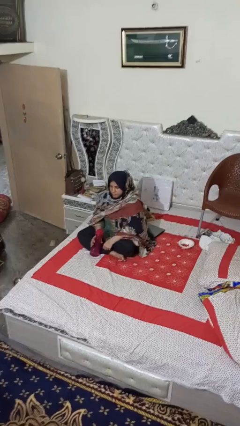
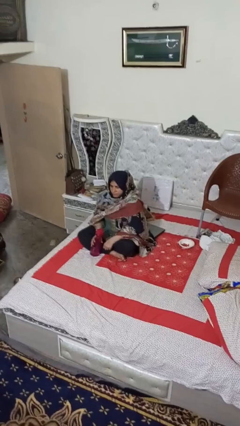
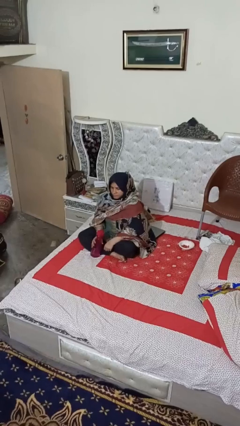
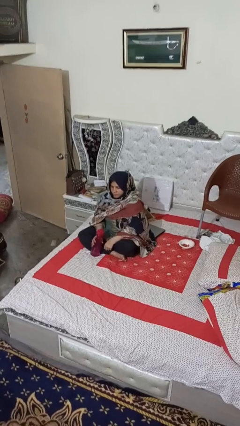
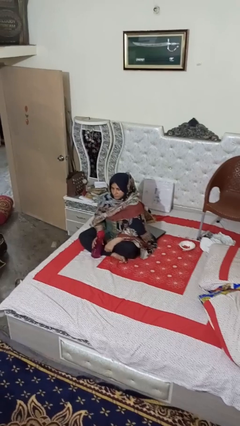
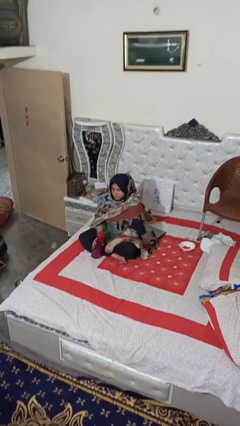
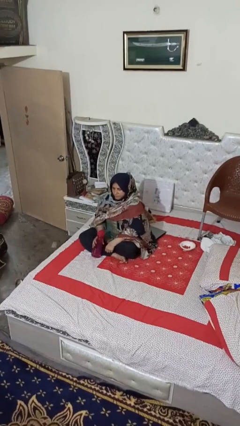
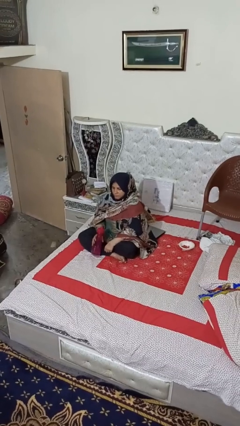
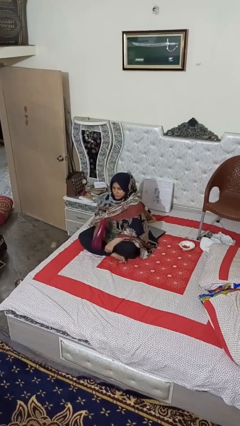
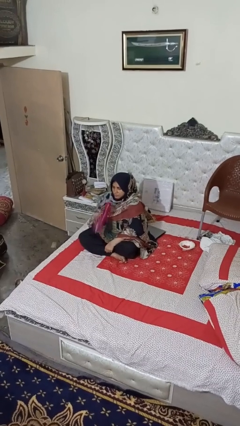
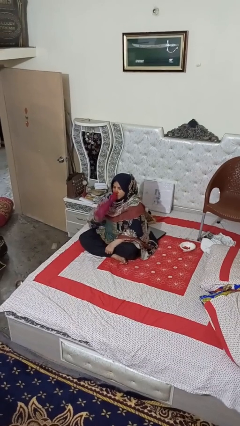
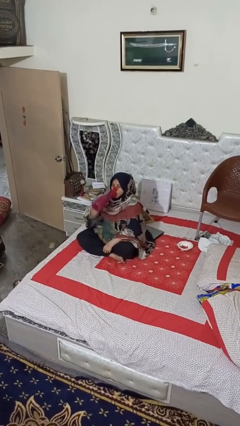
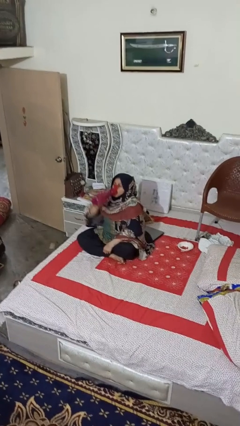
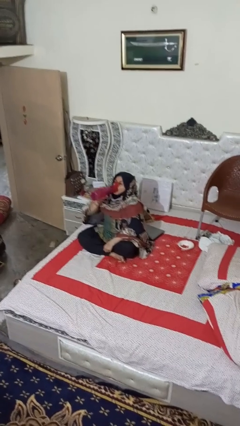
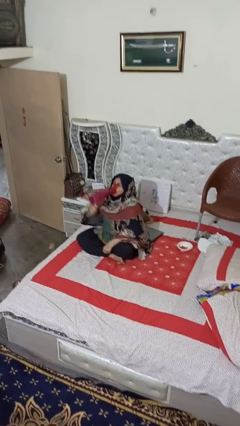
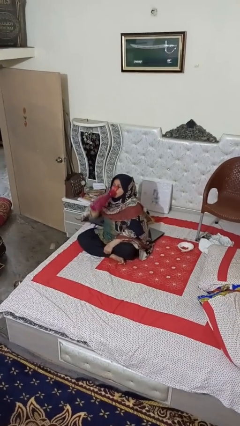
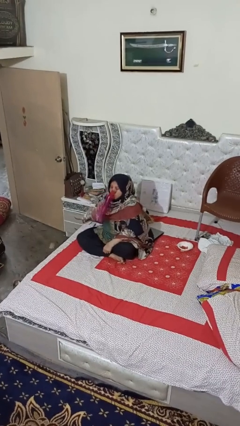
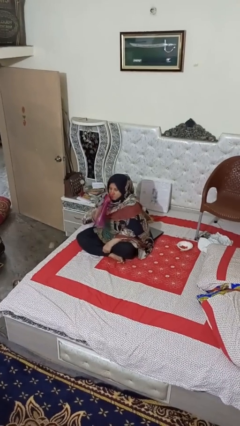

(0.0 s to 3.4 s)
person drinks from bottle

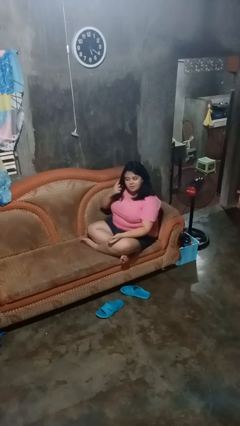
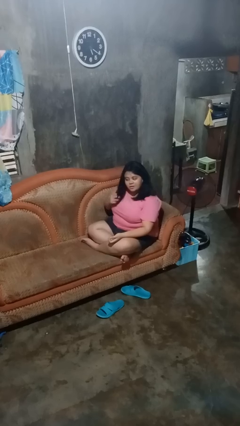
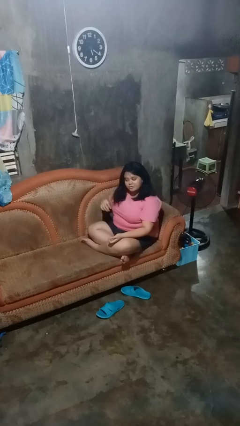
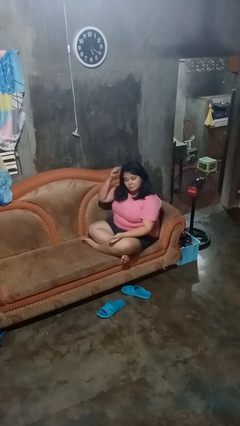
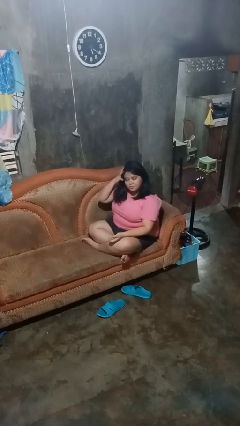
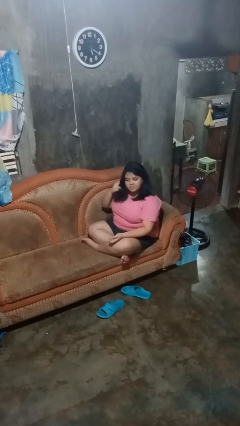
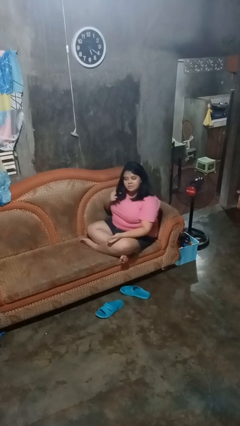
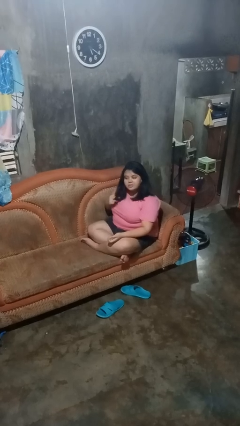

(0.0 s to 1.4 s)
person strokes hair

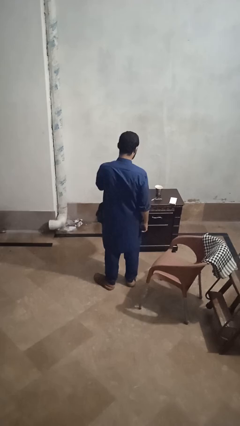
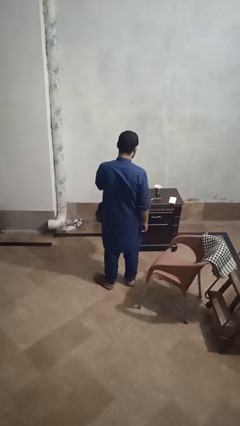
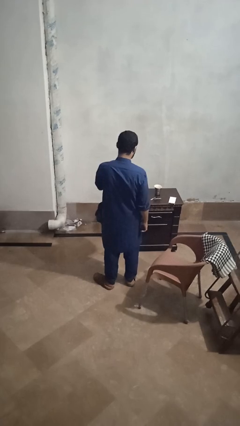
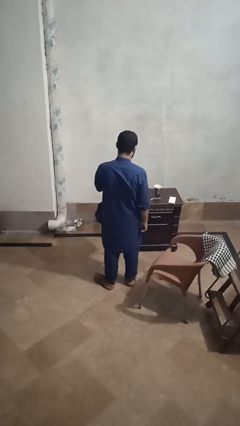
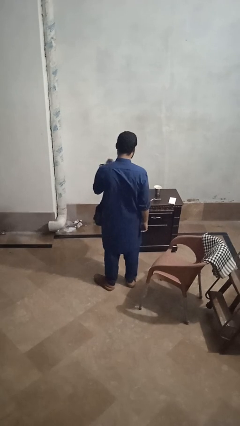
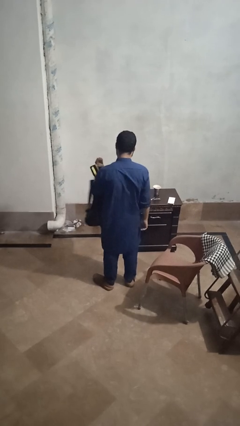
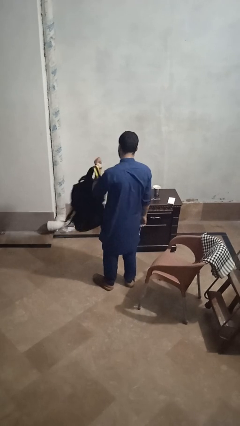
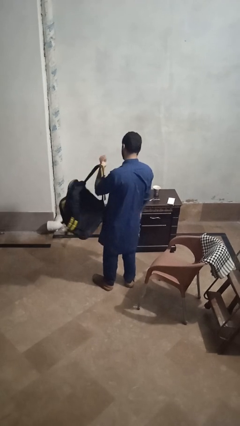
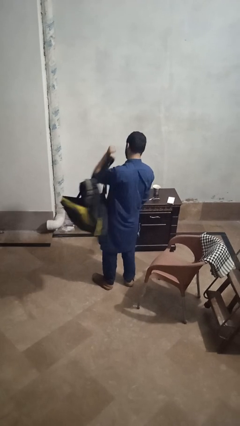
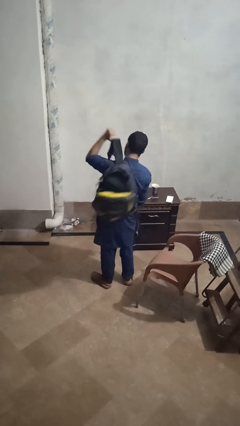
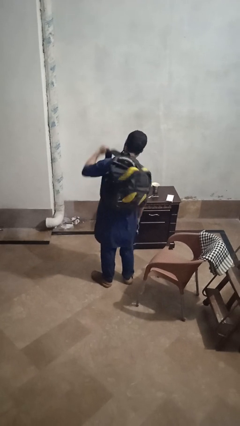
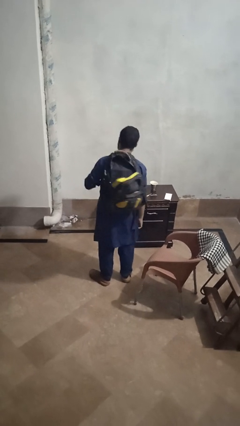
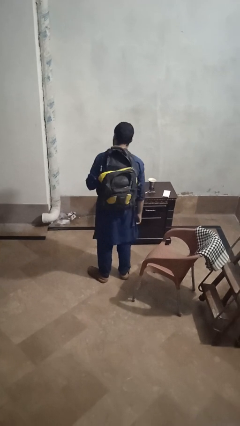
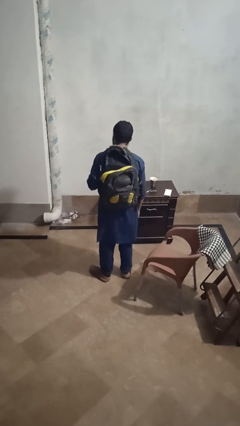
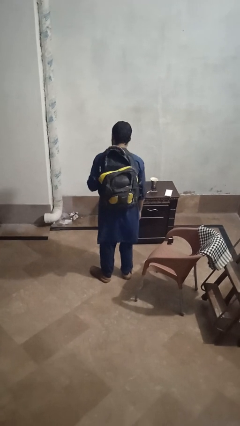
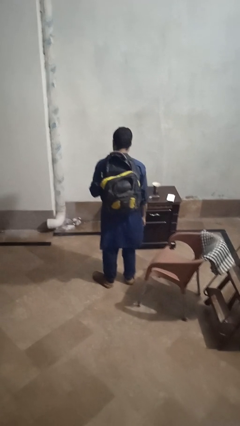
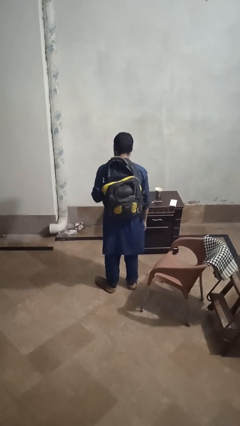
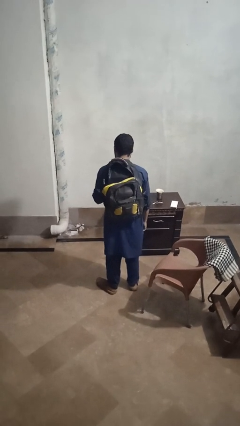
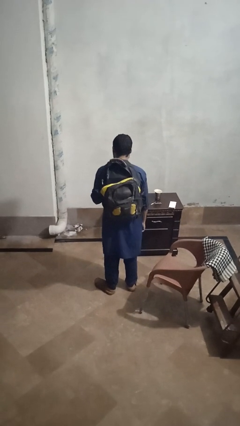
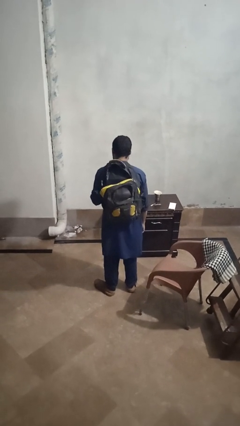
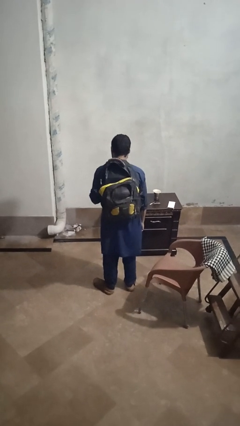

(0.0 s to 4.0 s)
person puts on backpack

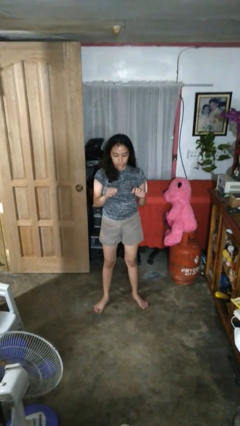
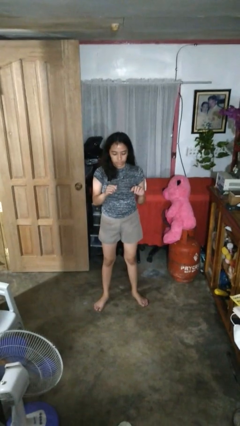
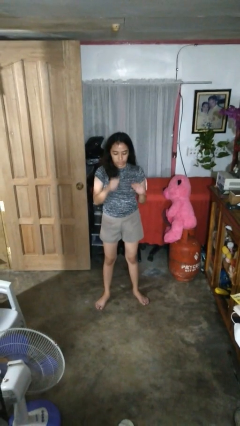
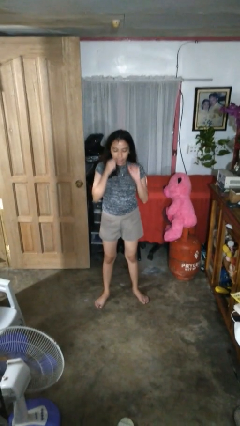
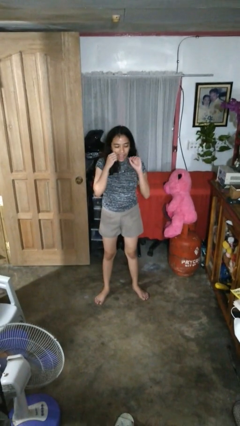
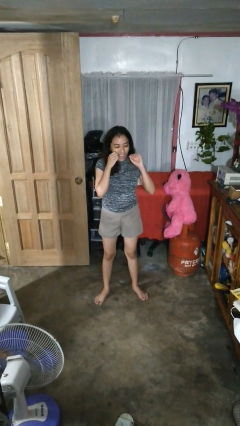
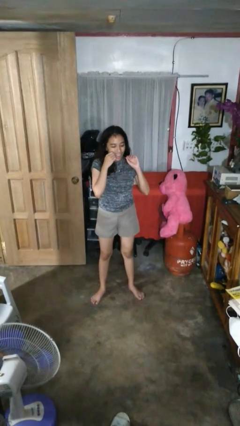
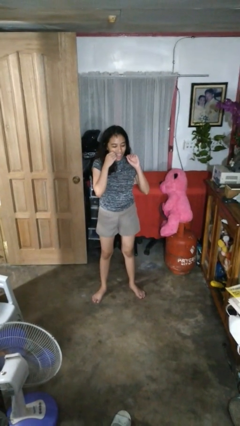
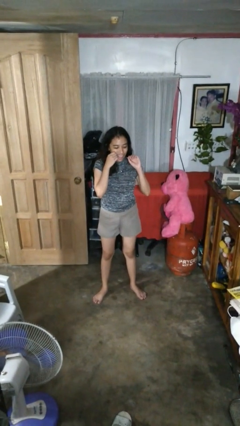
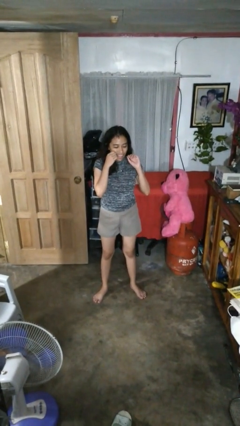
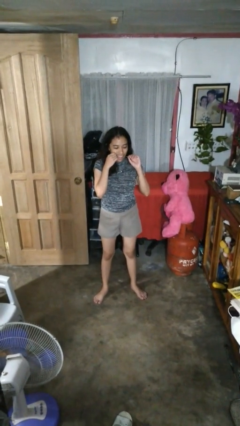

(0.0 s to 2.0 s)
person flosses

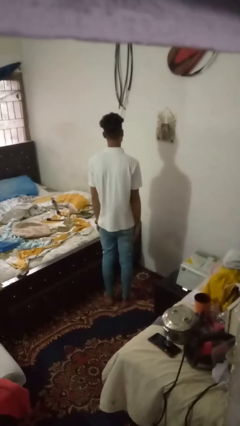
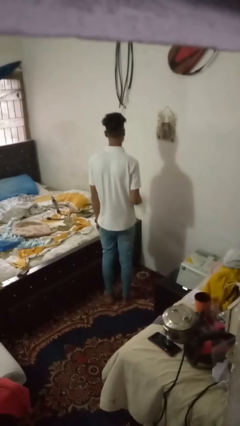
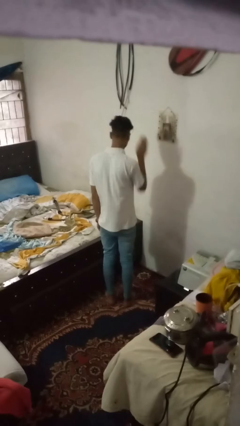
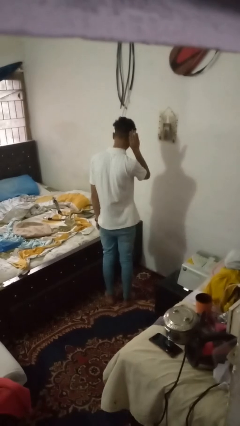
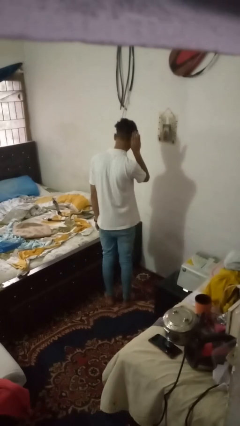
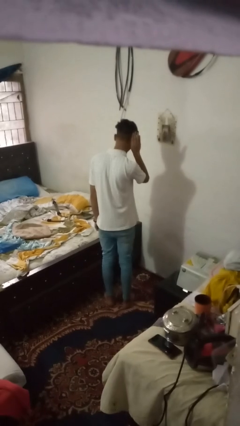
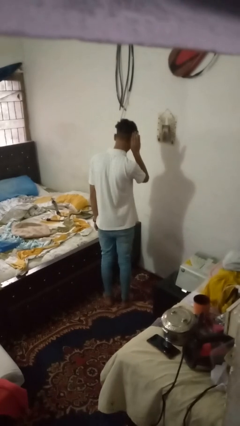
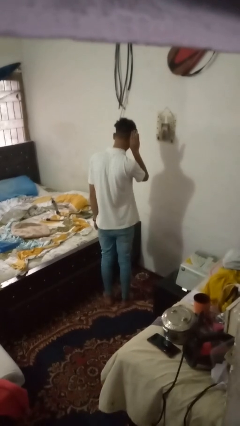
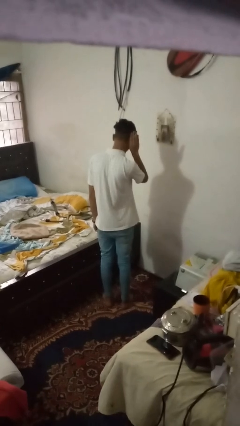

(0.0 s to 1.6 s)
person gestures listen closely

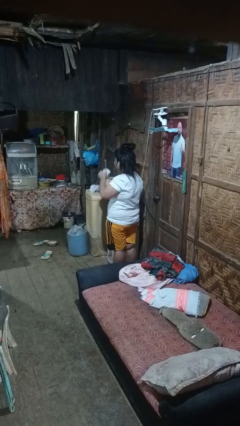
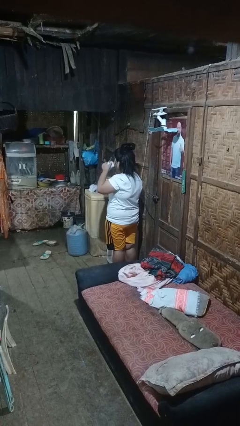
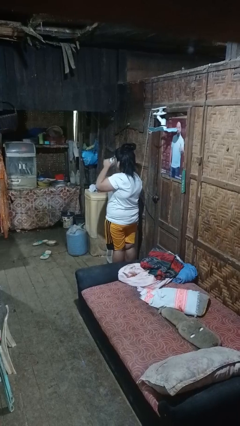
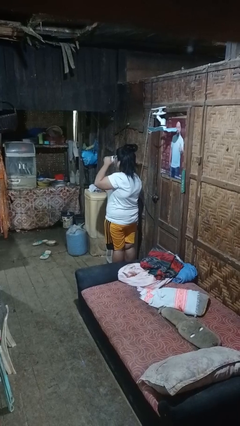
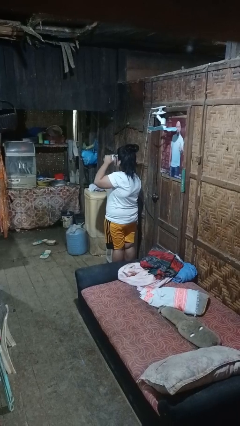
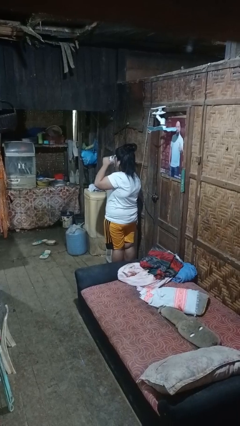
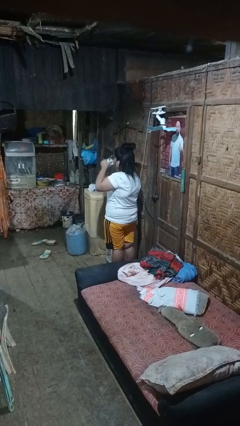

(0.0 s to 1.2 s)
person drinks from mug

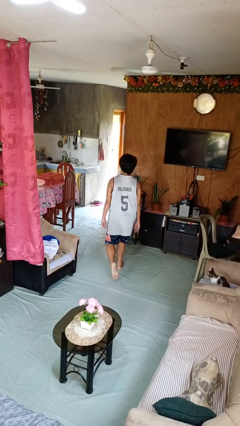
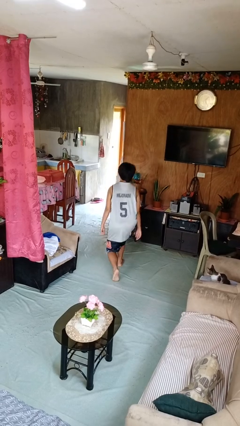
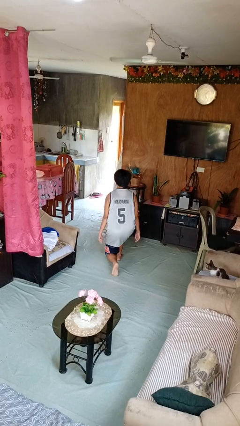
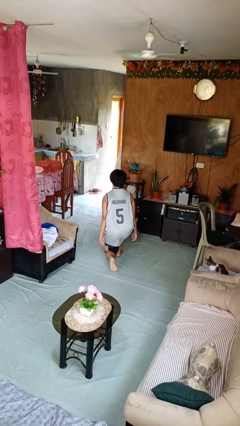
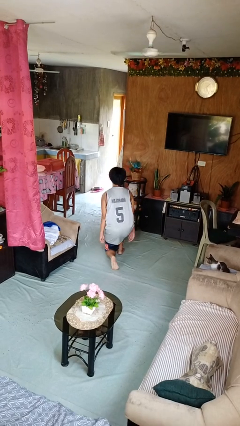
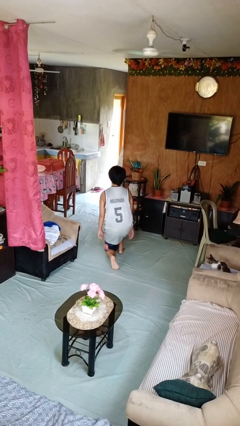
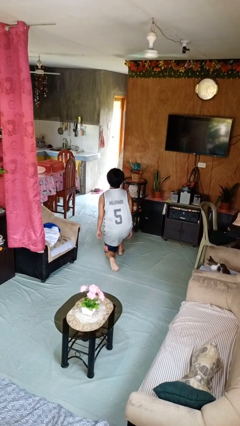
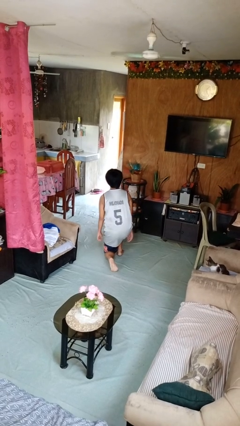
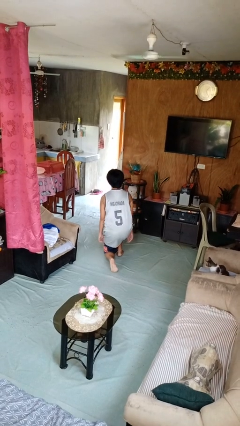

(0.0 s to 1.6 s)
person kneels

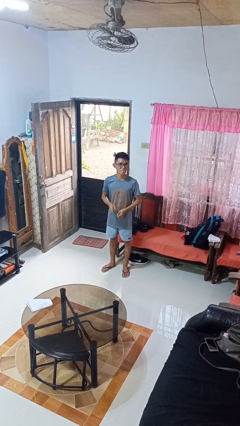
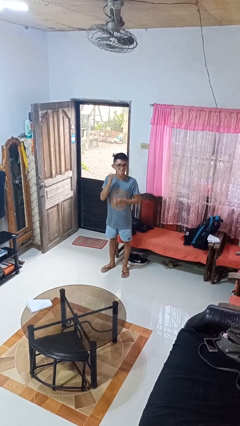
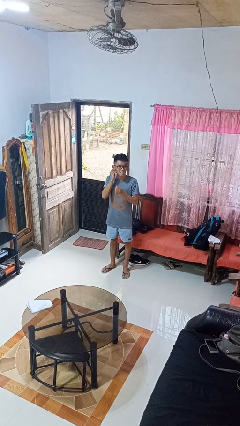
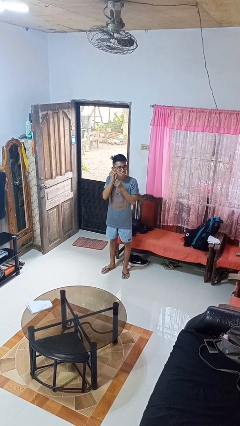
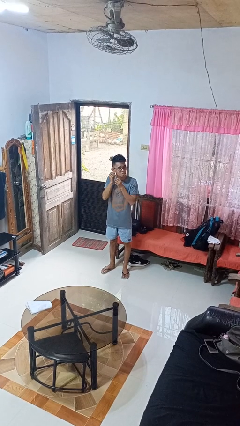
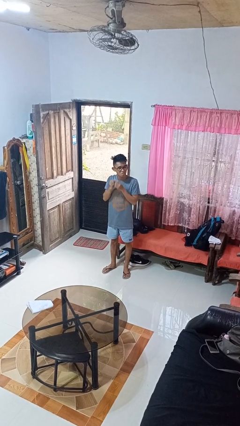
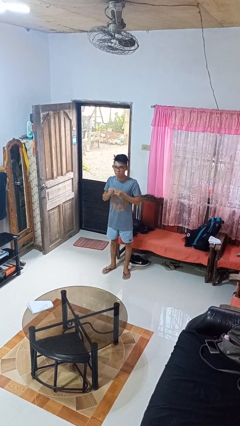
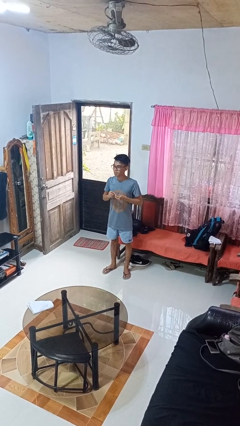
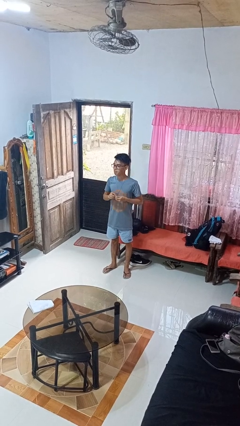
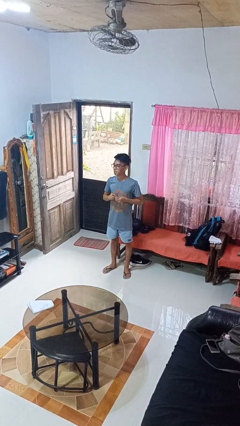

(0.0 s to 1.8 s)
person takes off earrings
